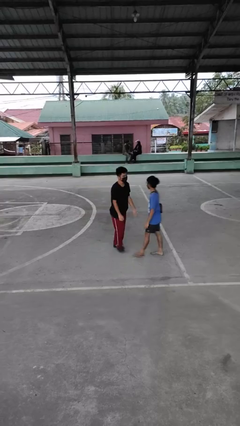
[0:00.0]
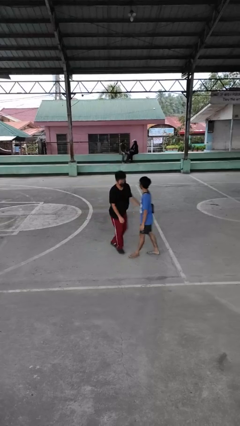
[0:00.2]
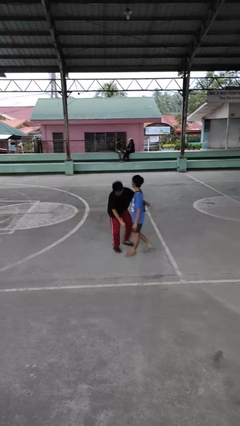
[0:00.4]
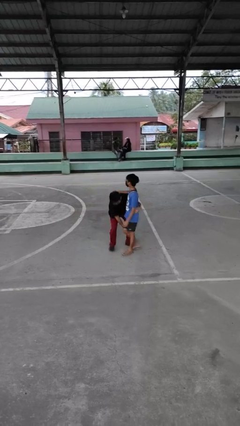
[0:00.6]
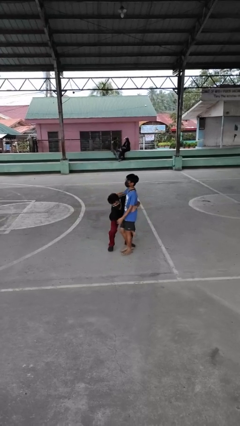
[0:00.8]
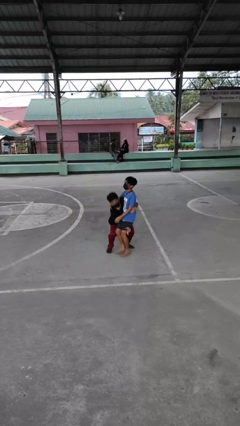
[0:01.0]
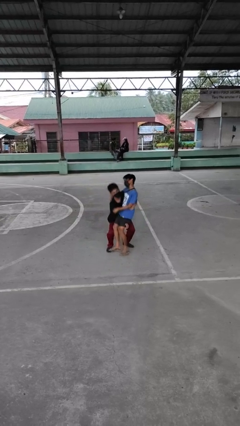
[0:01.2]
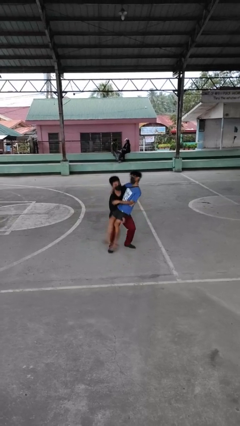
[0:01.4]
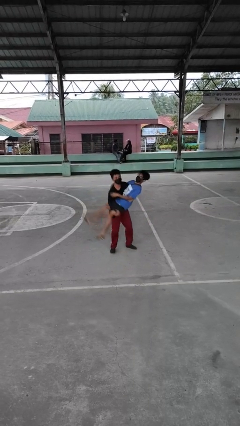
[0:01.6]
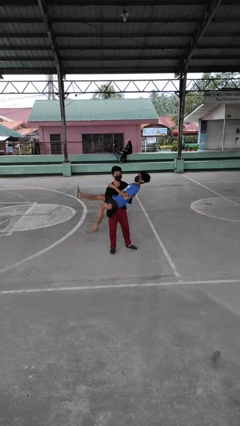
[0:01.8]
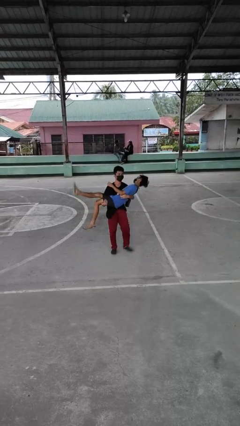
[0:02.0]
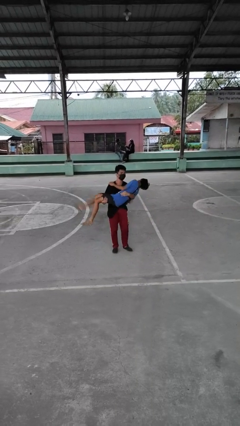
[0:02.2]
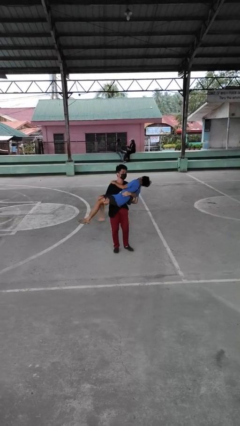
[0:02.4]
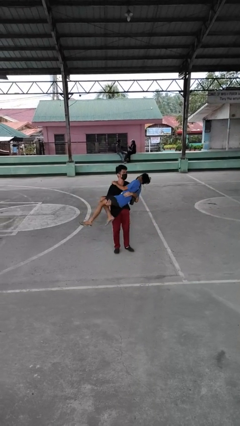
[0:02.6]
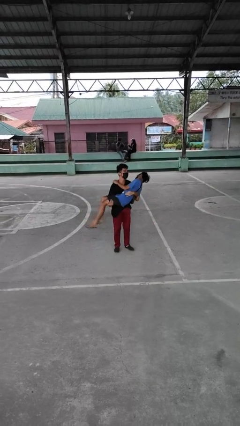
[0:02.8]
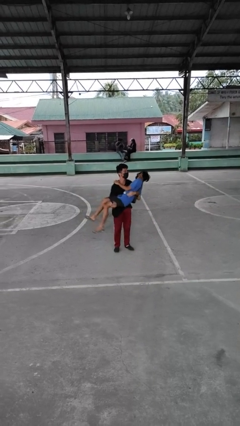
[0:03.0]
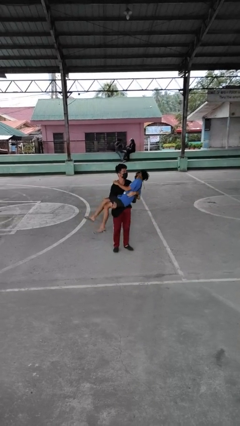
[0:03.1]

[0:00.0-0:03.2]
person picks up person

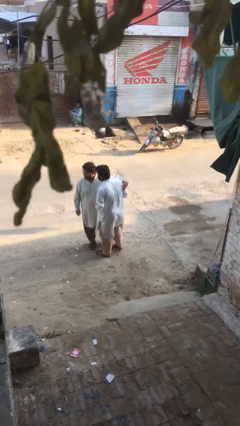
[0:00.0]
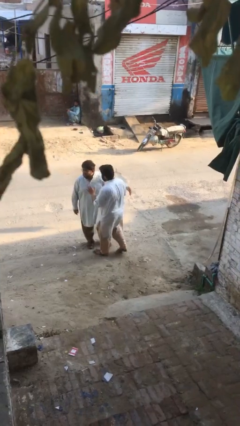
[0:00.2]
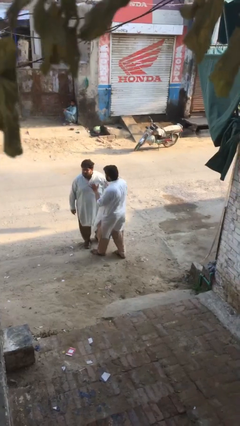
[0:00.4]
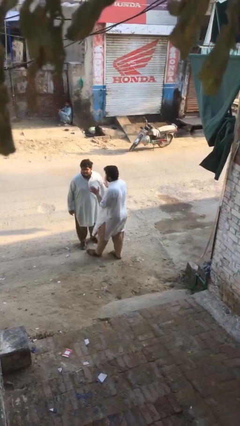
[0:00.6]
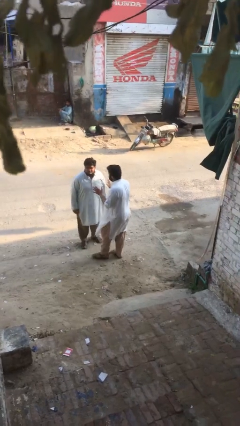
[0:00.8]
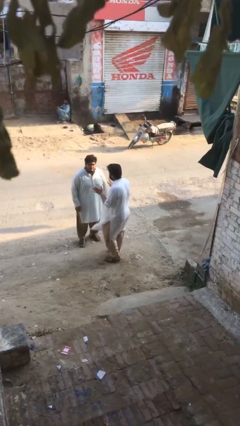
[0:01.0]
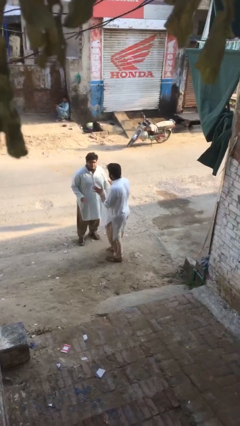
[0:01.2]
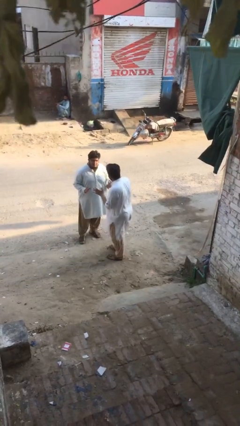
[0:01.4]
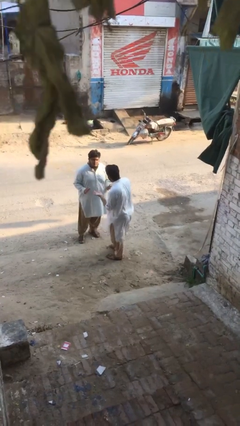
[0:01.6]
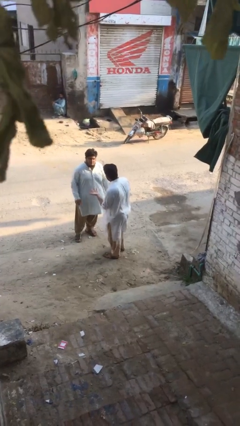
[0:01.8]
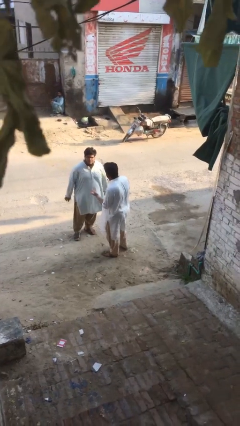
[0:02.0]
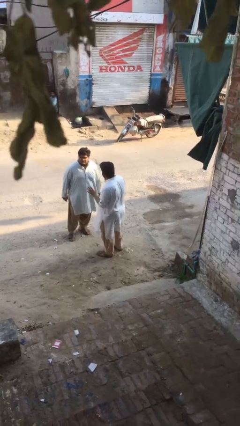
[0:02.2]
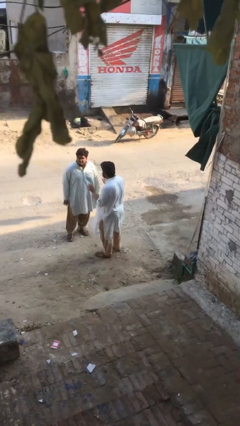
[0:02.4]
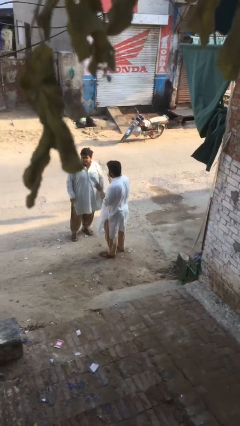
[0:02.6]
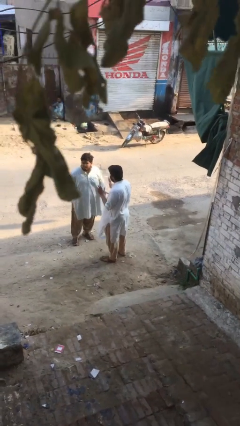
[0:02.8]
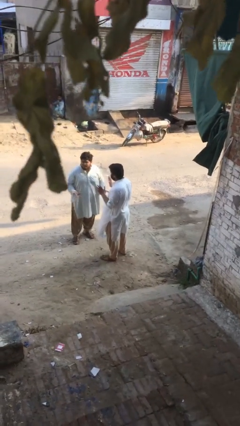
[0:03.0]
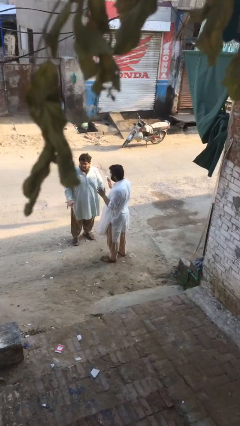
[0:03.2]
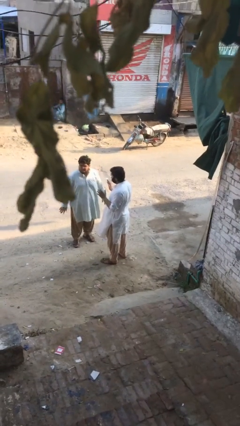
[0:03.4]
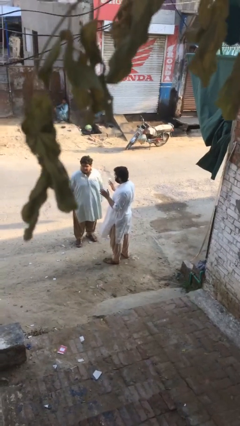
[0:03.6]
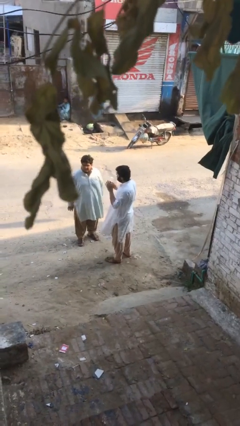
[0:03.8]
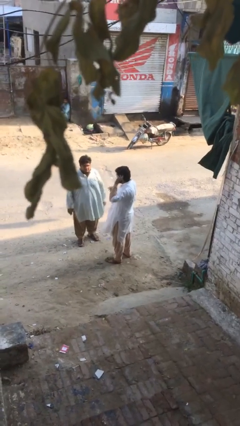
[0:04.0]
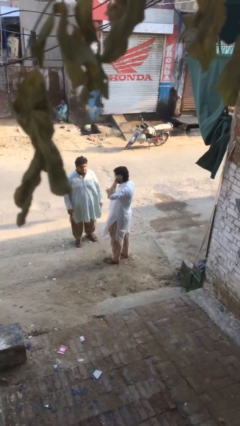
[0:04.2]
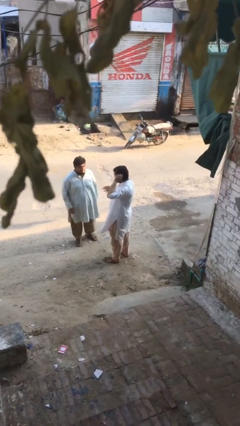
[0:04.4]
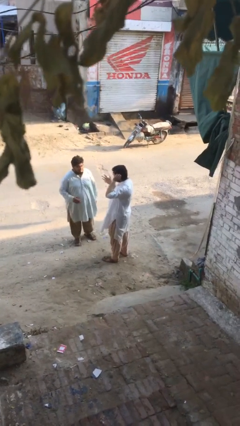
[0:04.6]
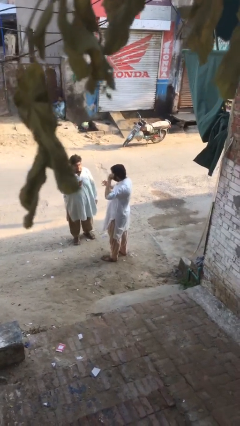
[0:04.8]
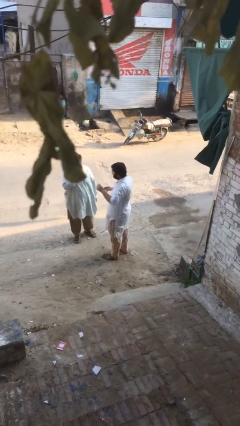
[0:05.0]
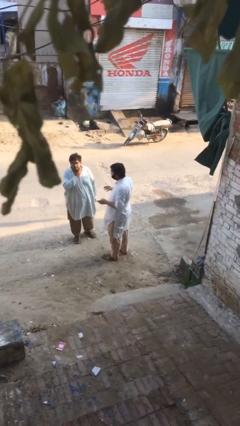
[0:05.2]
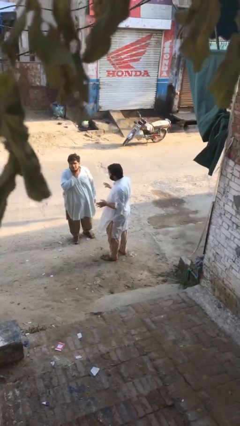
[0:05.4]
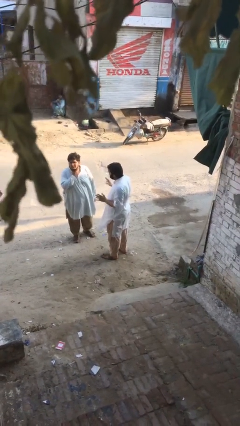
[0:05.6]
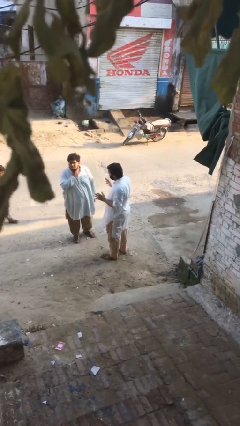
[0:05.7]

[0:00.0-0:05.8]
person talks to person

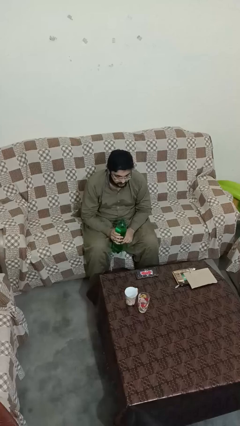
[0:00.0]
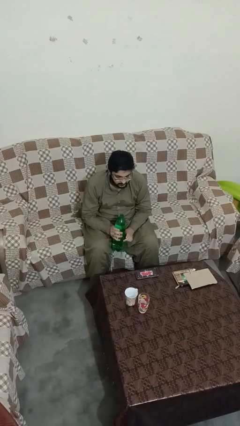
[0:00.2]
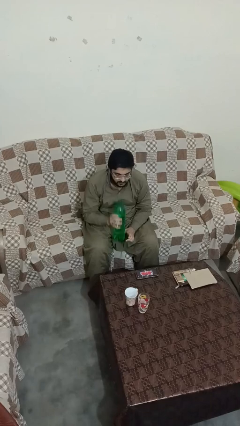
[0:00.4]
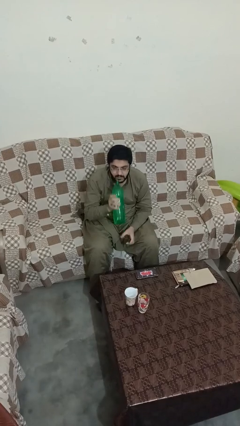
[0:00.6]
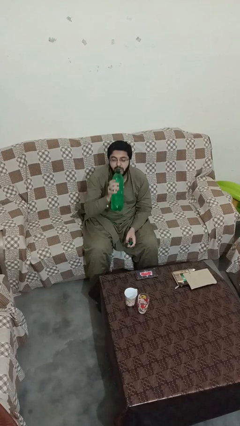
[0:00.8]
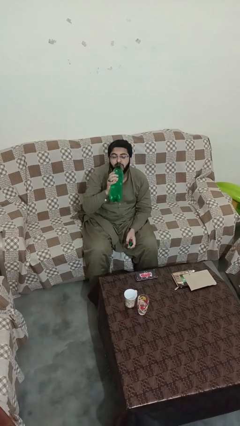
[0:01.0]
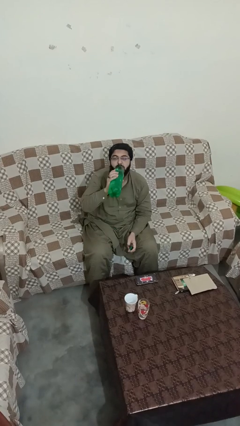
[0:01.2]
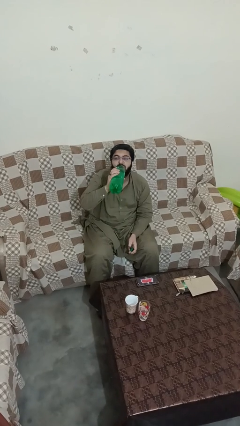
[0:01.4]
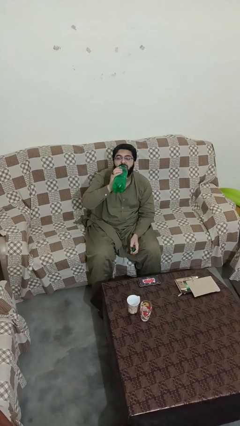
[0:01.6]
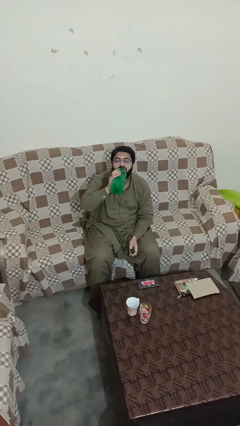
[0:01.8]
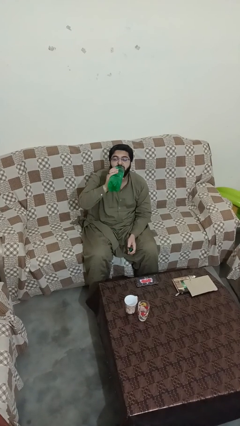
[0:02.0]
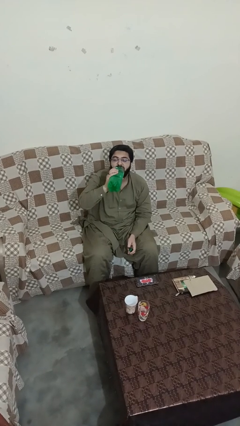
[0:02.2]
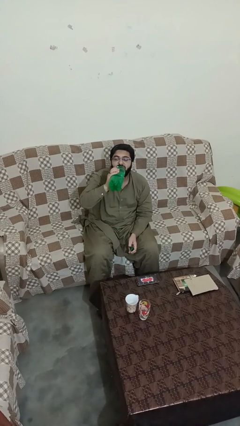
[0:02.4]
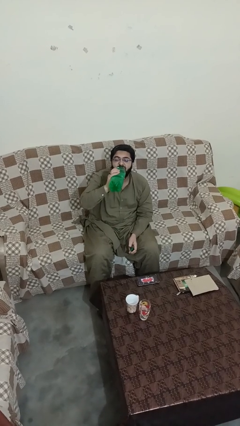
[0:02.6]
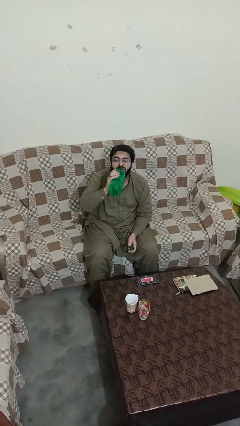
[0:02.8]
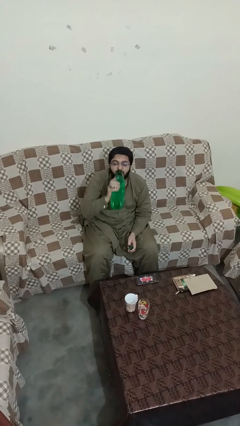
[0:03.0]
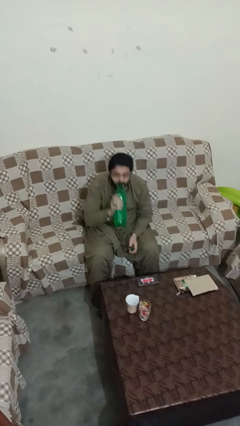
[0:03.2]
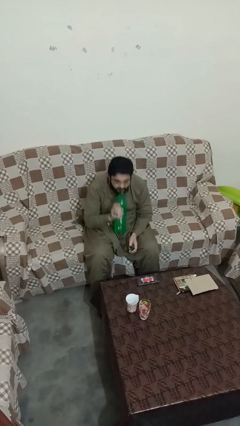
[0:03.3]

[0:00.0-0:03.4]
person drinks from bottle

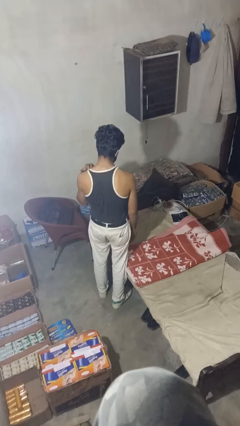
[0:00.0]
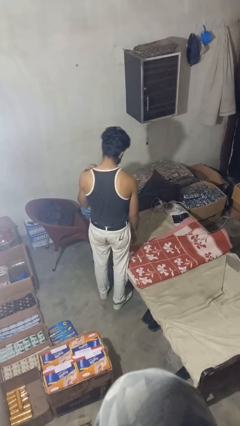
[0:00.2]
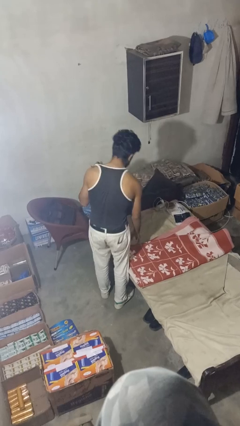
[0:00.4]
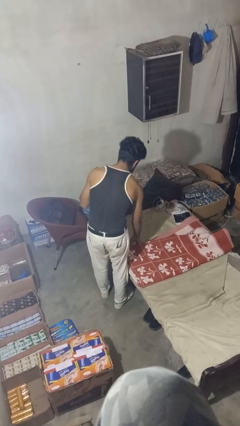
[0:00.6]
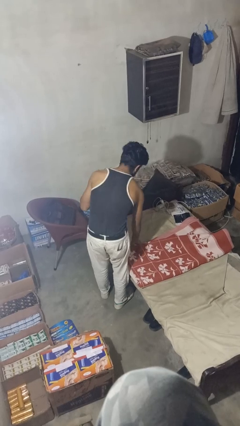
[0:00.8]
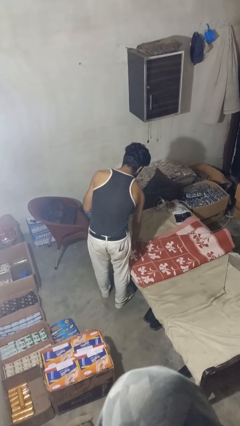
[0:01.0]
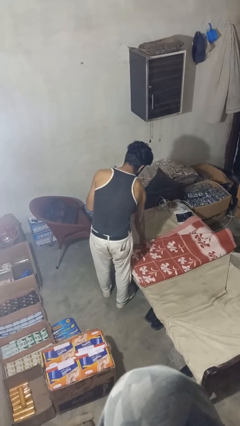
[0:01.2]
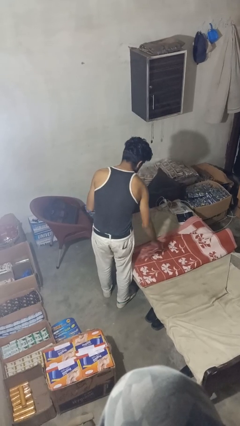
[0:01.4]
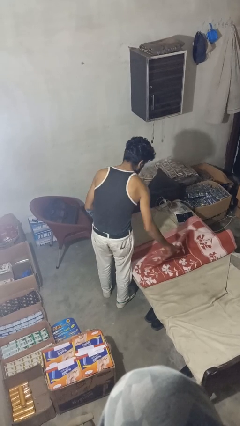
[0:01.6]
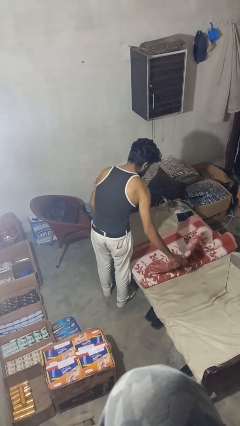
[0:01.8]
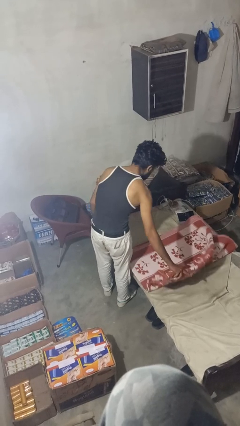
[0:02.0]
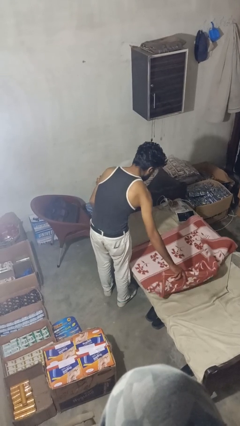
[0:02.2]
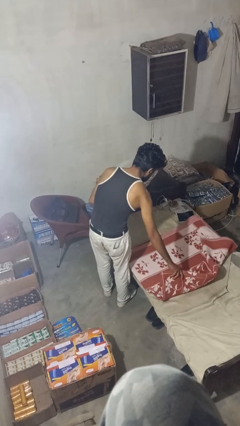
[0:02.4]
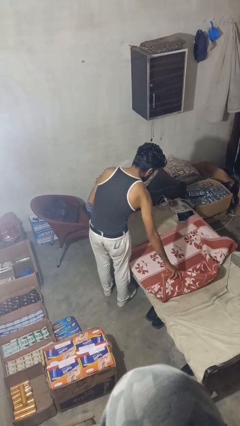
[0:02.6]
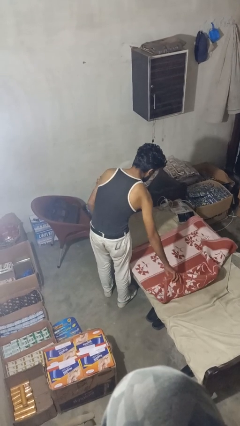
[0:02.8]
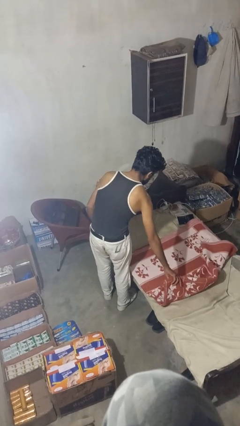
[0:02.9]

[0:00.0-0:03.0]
person makes bed

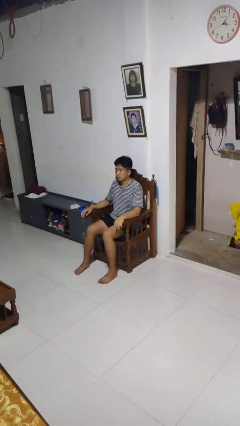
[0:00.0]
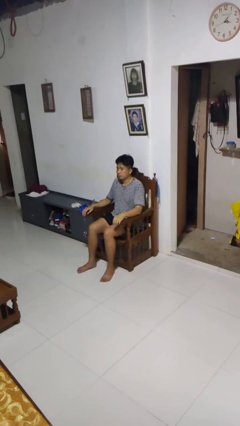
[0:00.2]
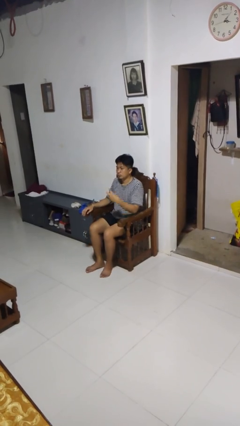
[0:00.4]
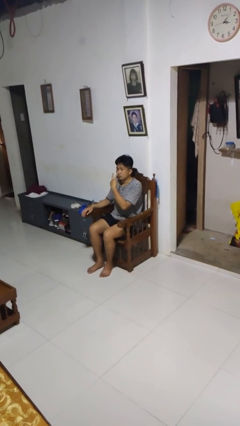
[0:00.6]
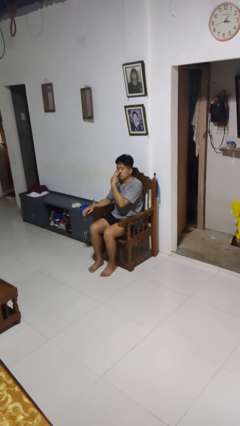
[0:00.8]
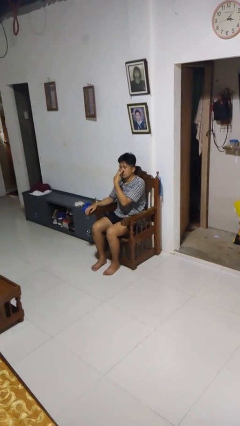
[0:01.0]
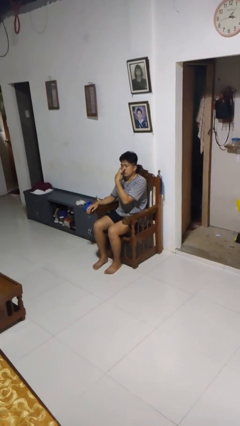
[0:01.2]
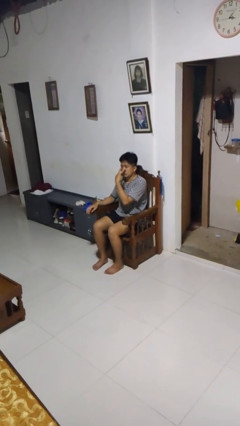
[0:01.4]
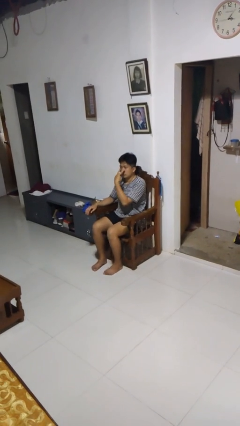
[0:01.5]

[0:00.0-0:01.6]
person gestures watch closely

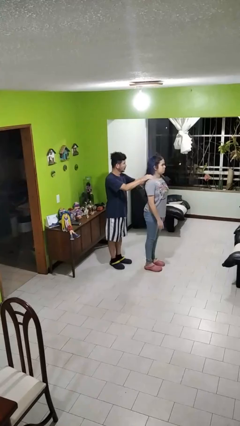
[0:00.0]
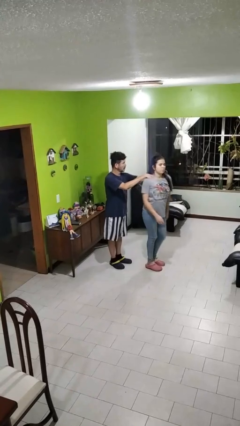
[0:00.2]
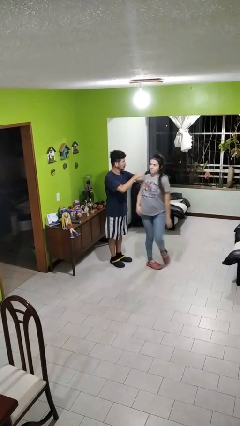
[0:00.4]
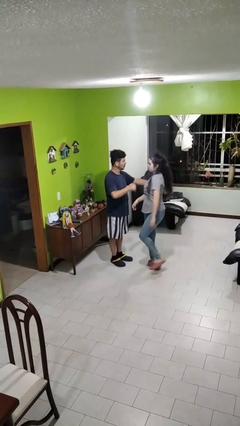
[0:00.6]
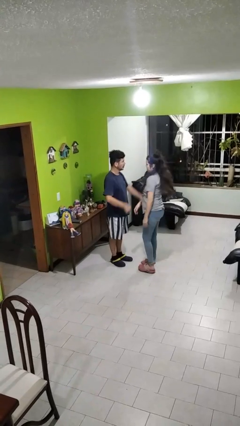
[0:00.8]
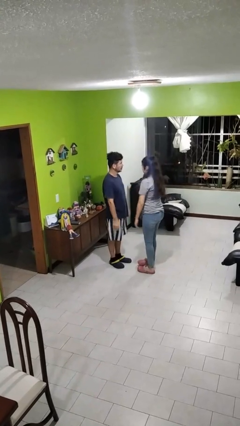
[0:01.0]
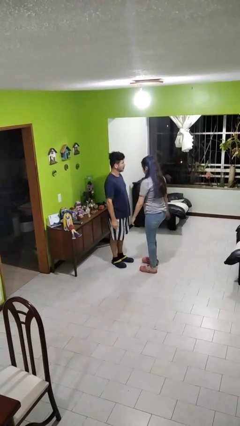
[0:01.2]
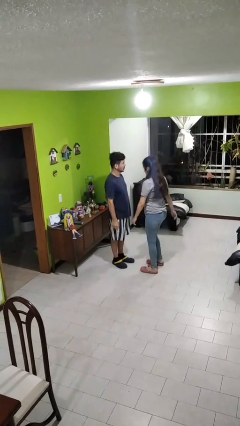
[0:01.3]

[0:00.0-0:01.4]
person spins person around
